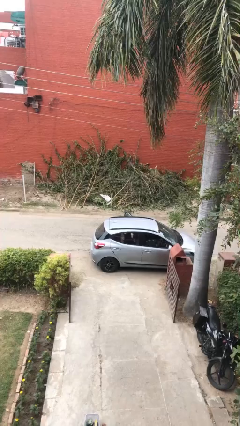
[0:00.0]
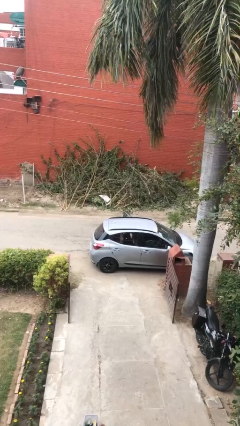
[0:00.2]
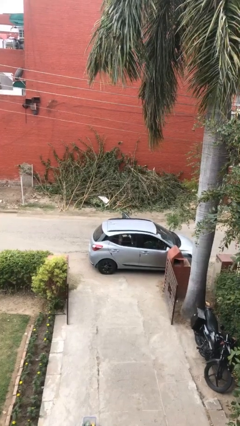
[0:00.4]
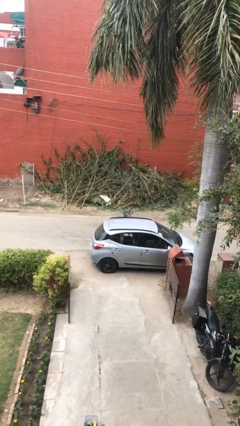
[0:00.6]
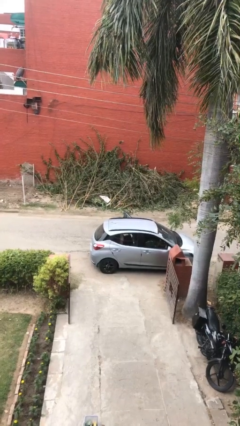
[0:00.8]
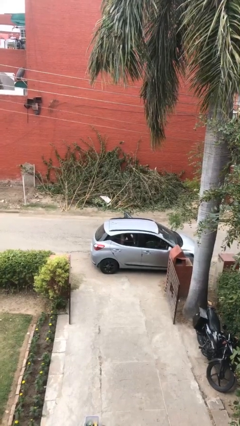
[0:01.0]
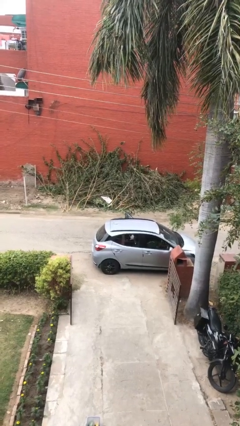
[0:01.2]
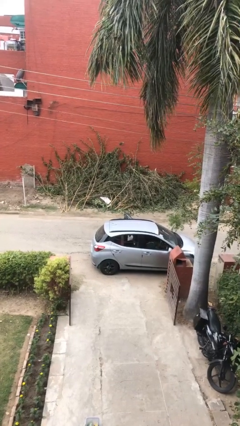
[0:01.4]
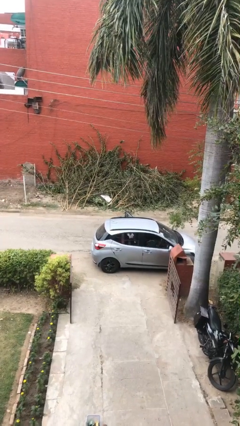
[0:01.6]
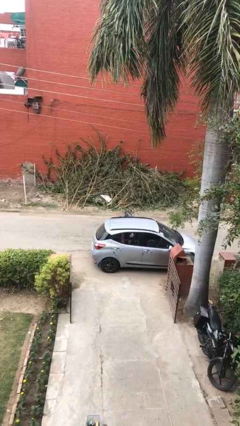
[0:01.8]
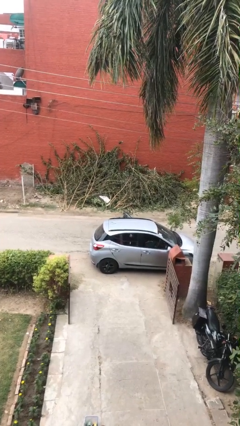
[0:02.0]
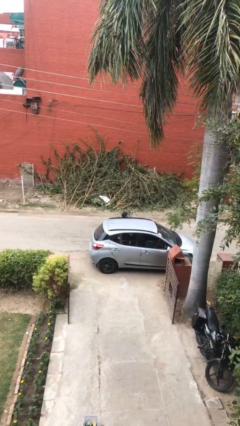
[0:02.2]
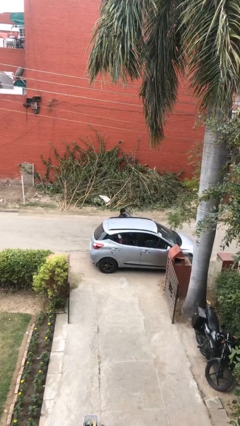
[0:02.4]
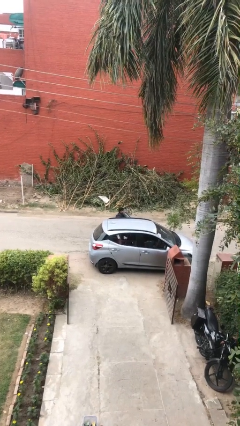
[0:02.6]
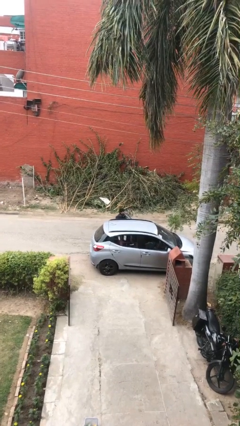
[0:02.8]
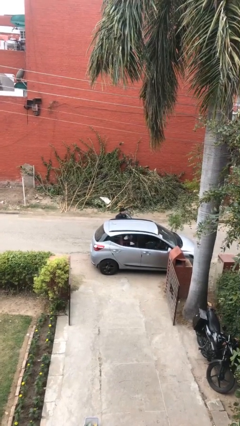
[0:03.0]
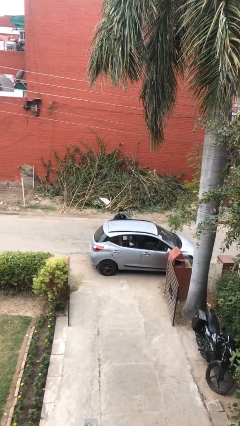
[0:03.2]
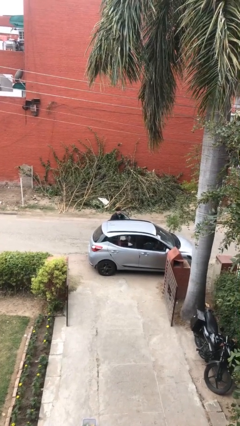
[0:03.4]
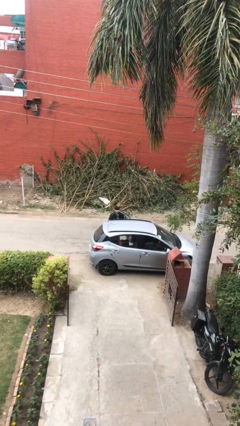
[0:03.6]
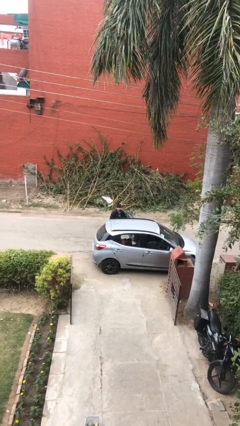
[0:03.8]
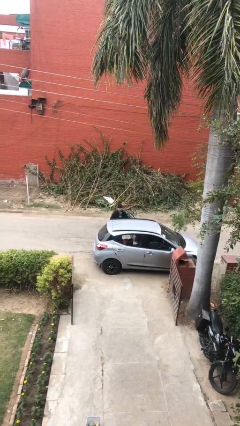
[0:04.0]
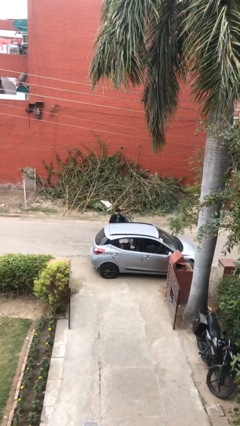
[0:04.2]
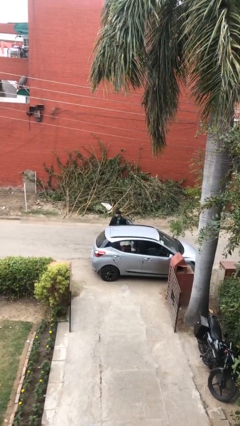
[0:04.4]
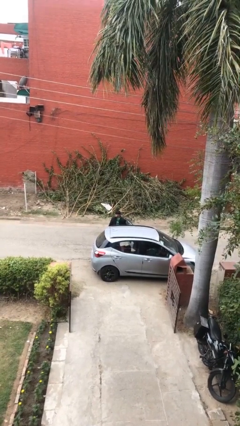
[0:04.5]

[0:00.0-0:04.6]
person exits car

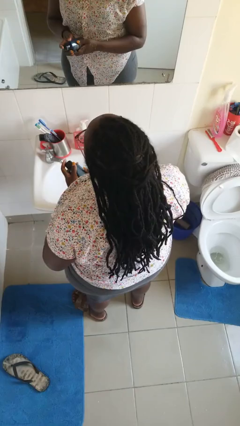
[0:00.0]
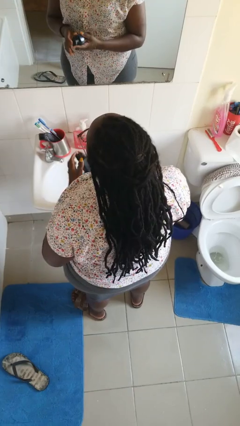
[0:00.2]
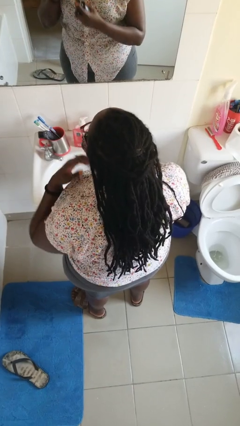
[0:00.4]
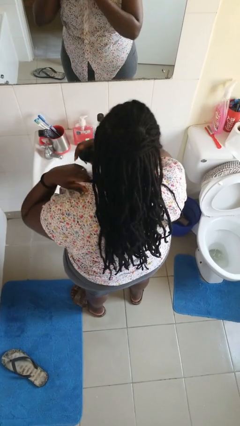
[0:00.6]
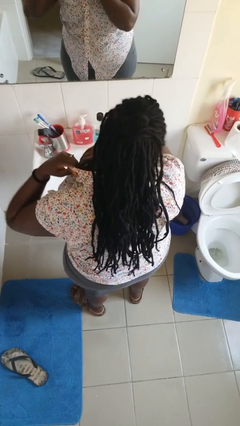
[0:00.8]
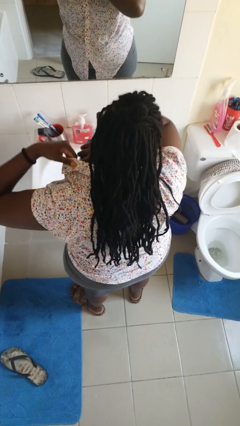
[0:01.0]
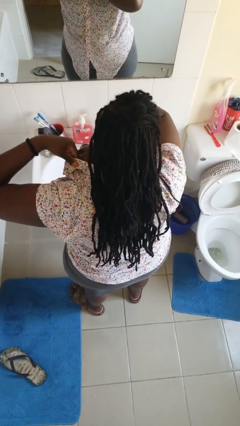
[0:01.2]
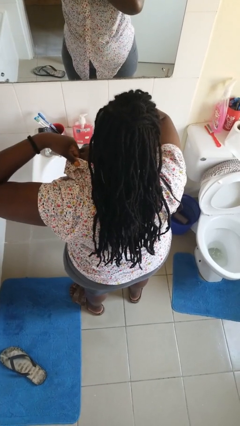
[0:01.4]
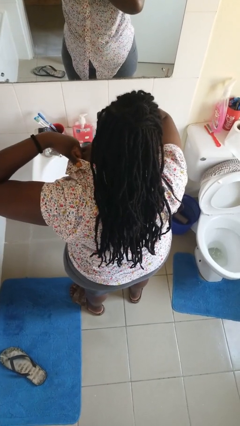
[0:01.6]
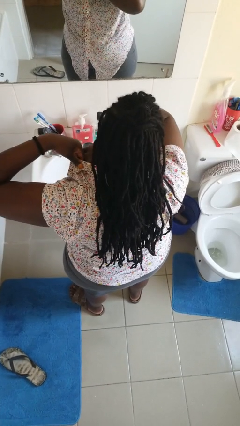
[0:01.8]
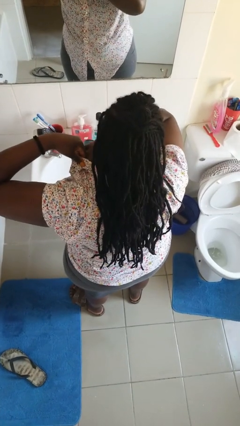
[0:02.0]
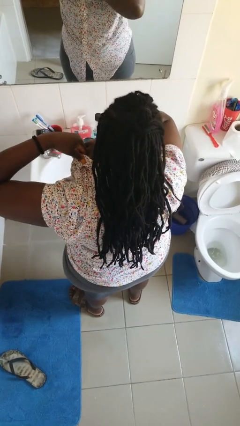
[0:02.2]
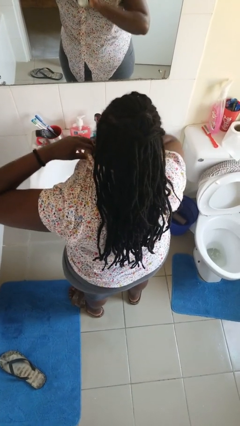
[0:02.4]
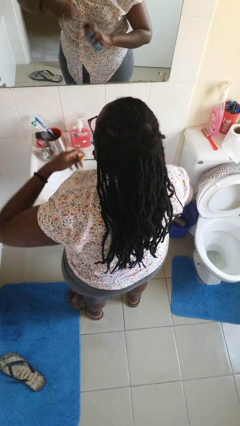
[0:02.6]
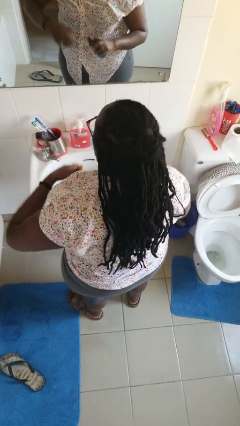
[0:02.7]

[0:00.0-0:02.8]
person applies deodorant

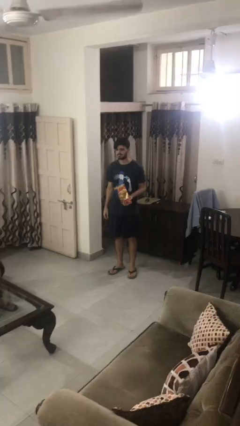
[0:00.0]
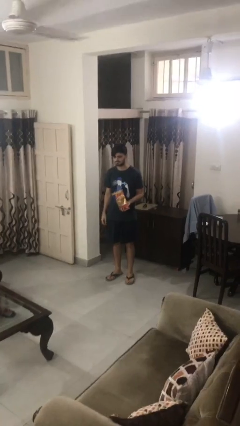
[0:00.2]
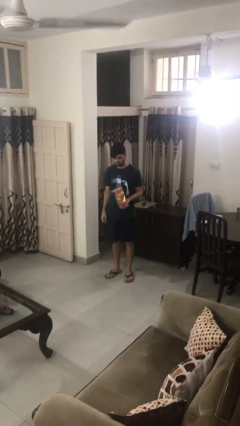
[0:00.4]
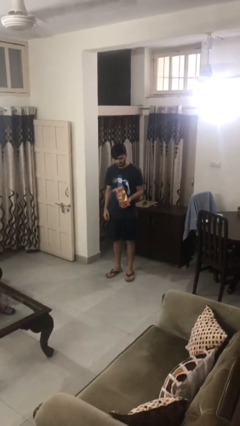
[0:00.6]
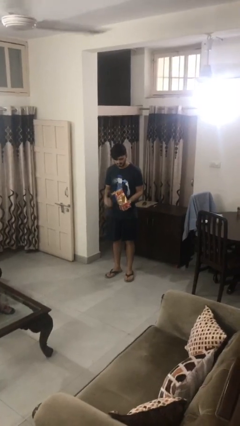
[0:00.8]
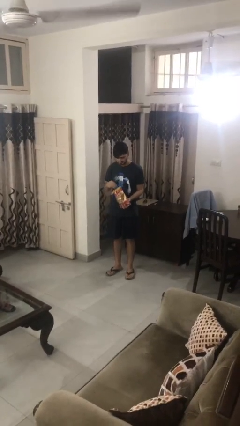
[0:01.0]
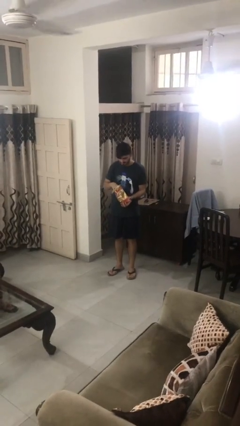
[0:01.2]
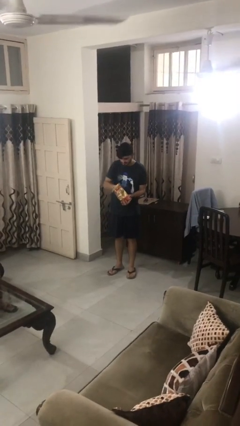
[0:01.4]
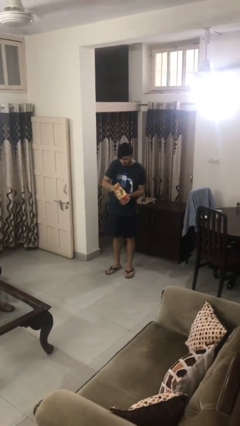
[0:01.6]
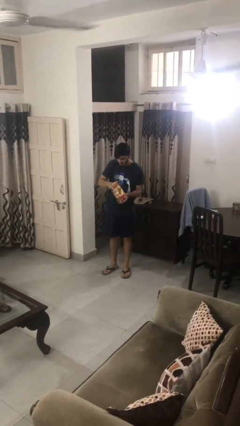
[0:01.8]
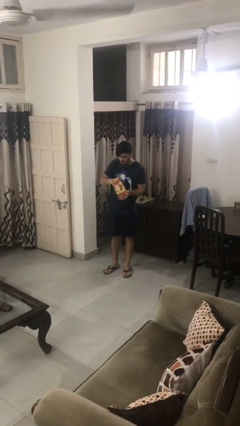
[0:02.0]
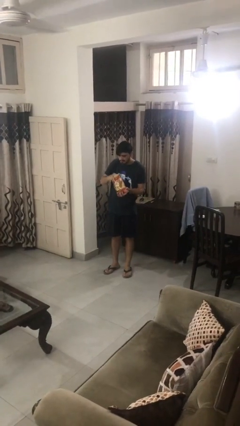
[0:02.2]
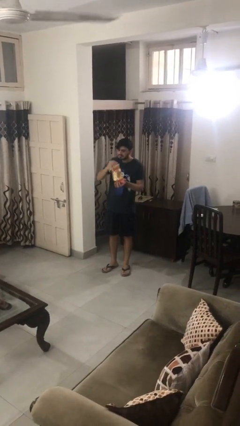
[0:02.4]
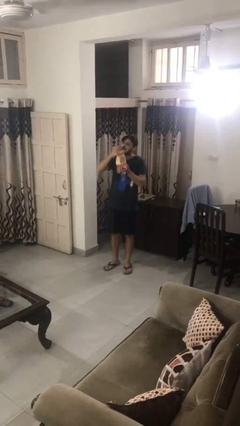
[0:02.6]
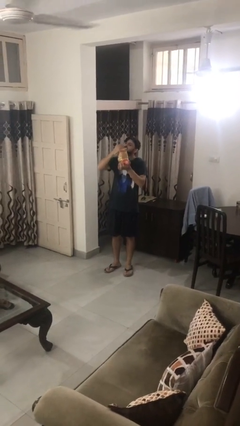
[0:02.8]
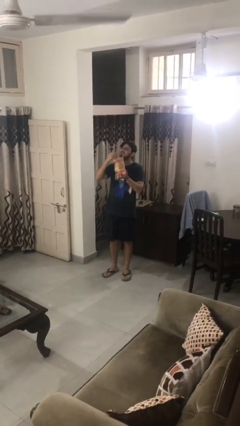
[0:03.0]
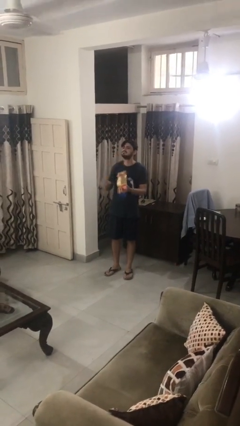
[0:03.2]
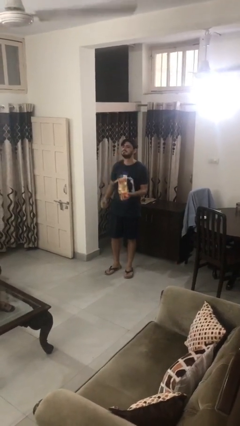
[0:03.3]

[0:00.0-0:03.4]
person eats snack from bag

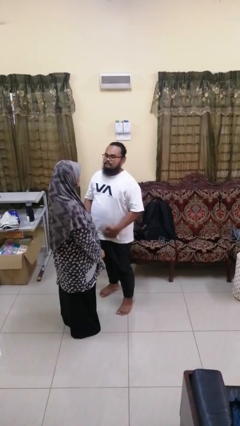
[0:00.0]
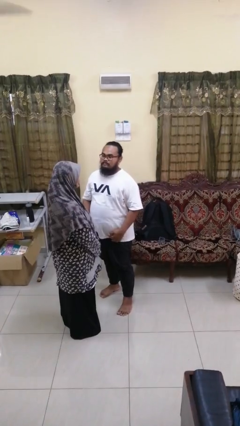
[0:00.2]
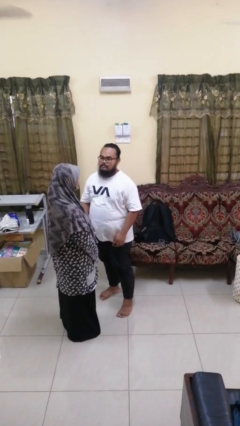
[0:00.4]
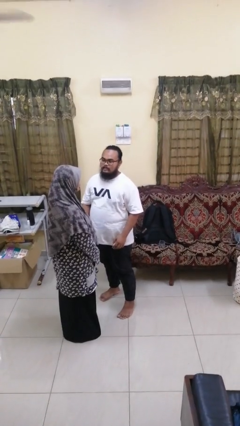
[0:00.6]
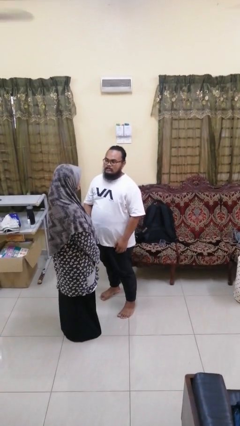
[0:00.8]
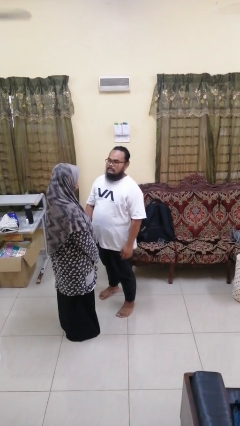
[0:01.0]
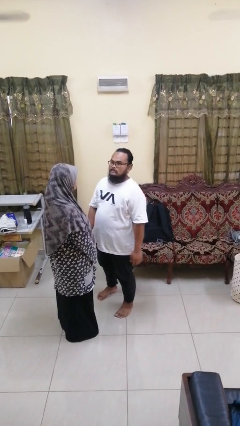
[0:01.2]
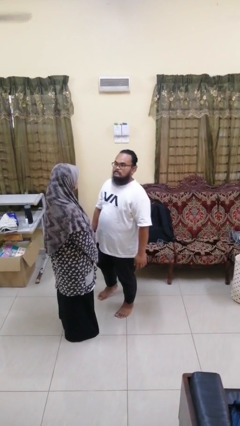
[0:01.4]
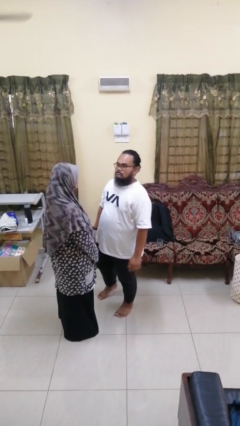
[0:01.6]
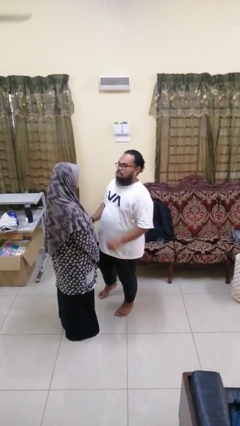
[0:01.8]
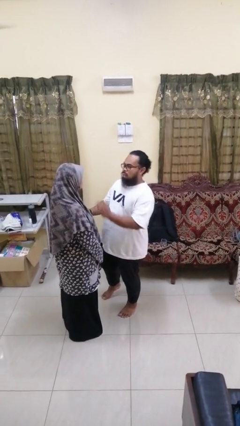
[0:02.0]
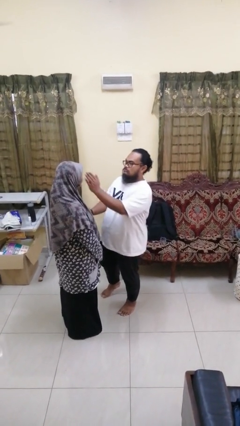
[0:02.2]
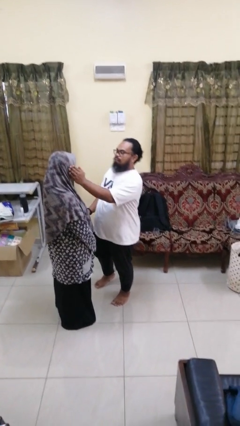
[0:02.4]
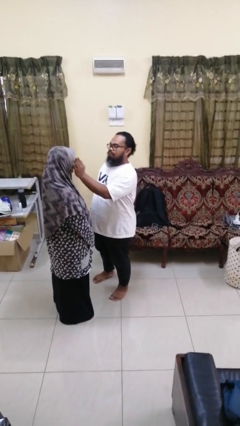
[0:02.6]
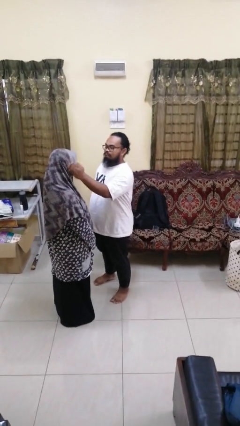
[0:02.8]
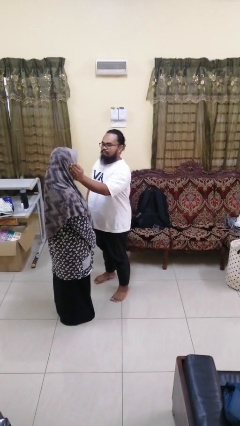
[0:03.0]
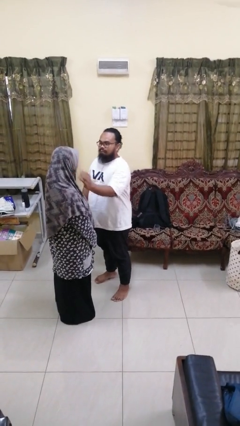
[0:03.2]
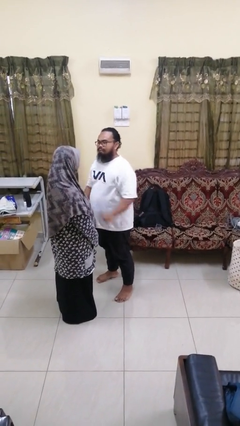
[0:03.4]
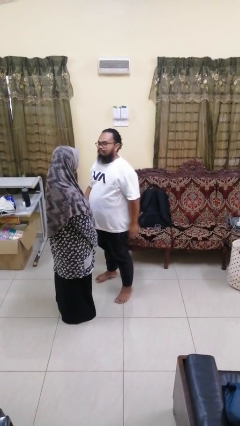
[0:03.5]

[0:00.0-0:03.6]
person touches face of person

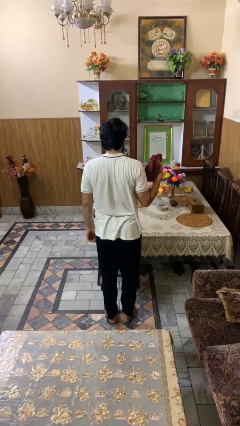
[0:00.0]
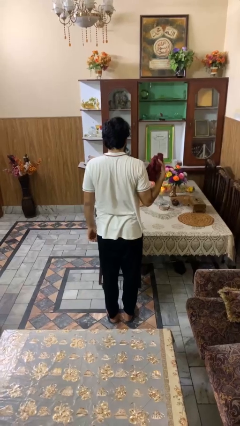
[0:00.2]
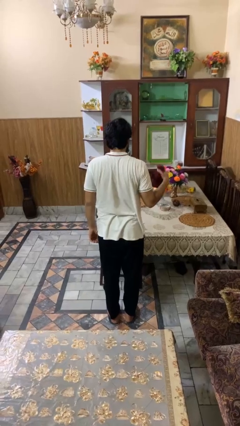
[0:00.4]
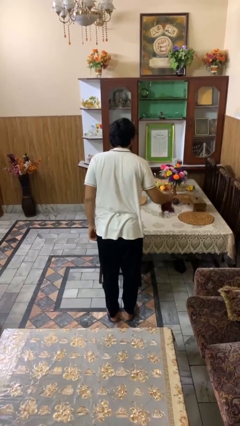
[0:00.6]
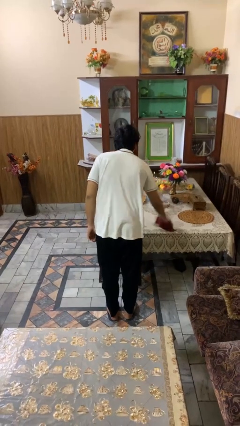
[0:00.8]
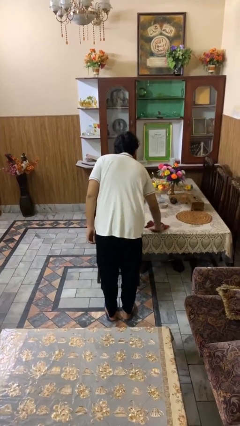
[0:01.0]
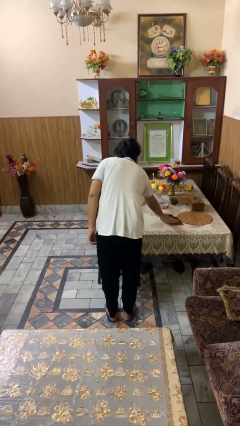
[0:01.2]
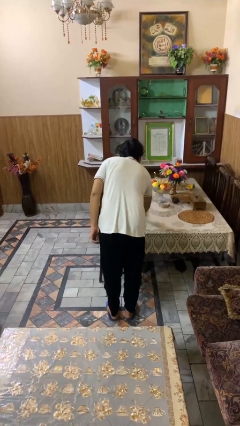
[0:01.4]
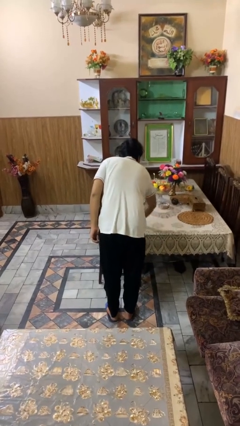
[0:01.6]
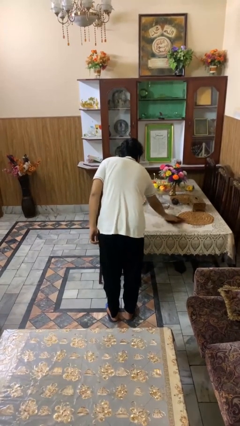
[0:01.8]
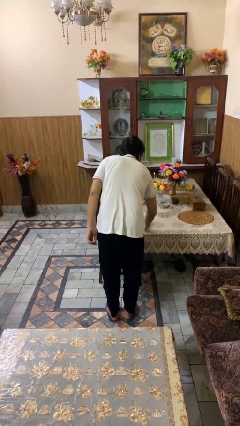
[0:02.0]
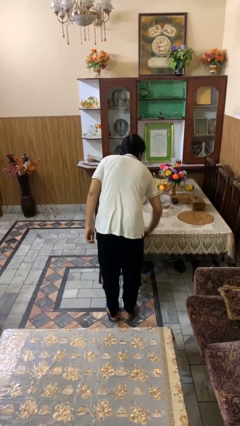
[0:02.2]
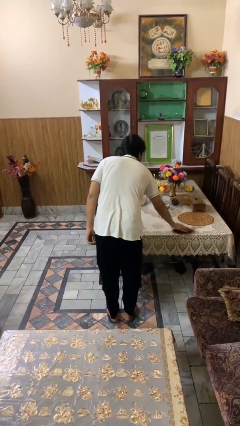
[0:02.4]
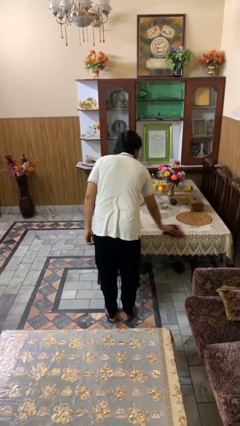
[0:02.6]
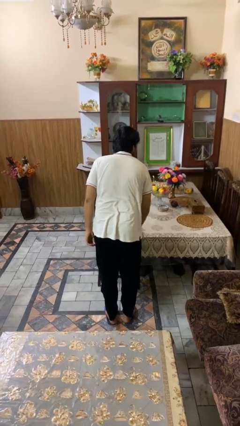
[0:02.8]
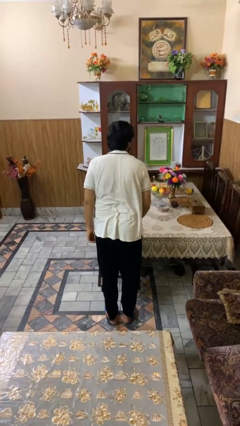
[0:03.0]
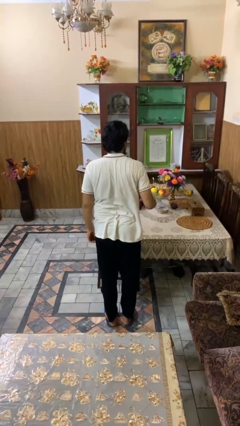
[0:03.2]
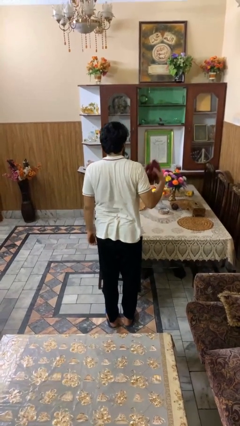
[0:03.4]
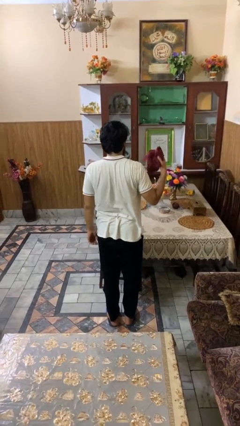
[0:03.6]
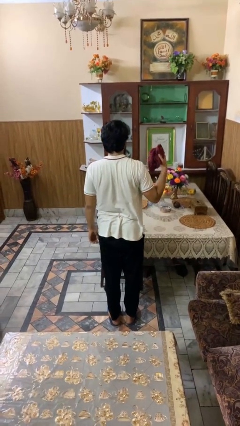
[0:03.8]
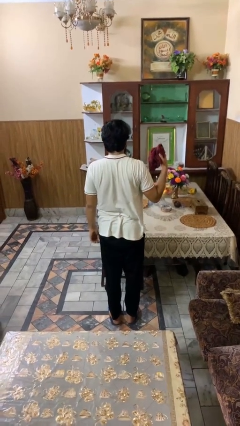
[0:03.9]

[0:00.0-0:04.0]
person cleans table with rag
